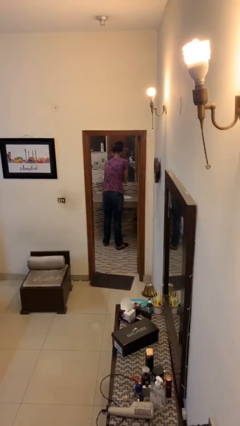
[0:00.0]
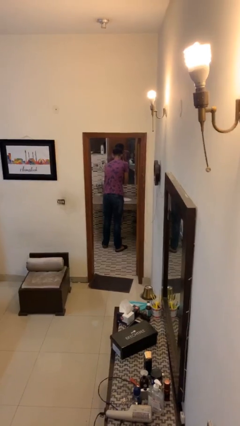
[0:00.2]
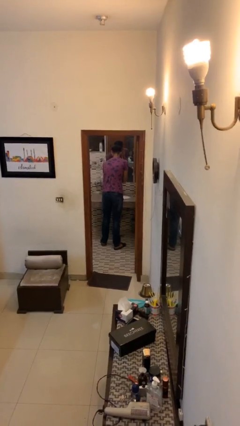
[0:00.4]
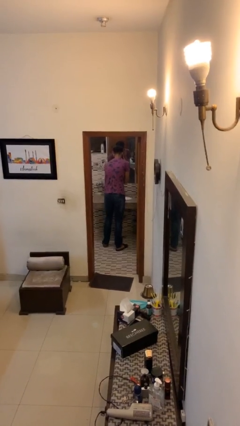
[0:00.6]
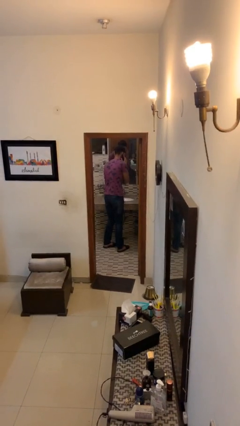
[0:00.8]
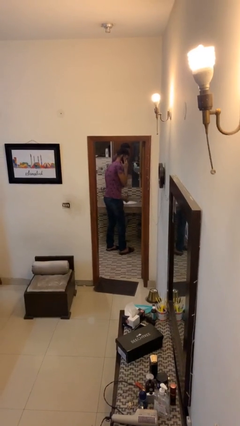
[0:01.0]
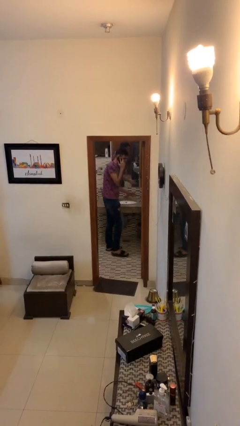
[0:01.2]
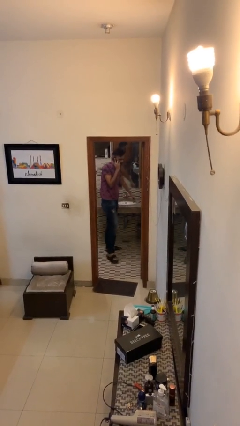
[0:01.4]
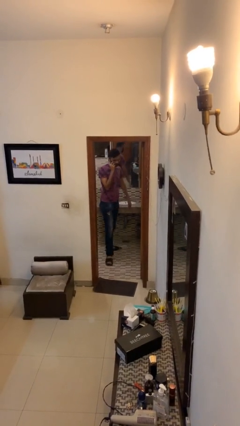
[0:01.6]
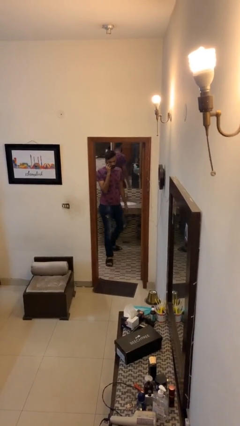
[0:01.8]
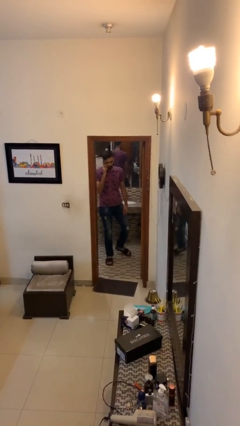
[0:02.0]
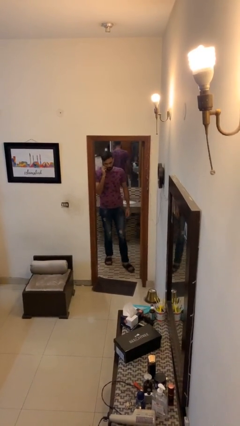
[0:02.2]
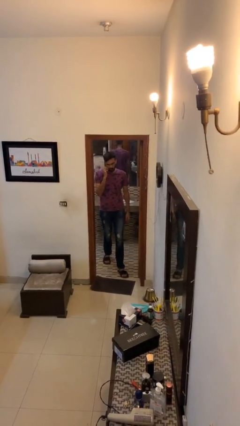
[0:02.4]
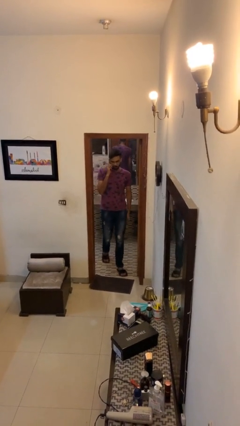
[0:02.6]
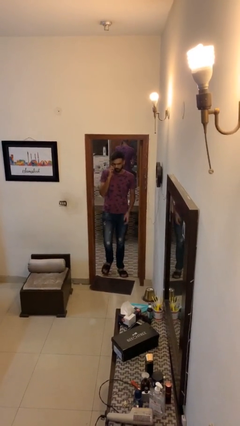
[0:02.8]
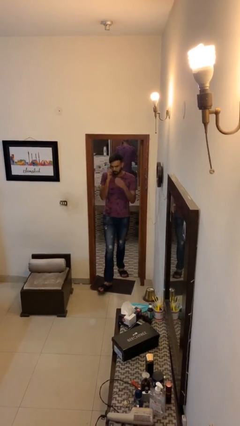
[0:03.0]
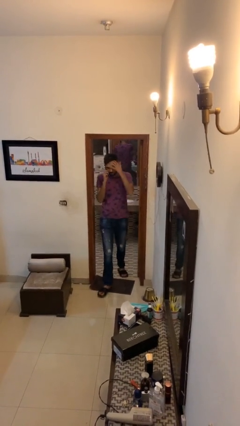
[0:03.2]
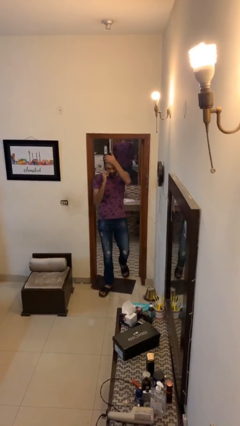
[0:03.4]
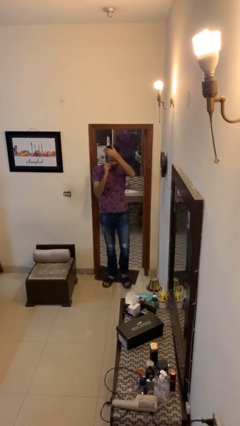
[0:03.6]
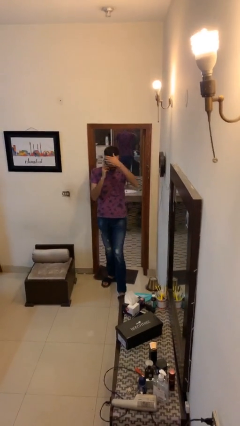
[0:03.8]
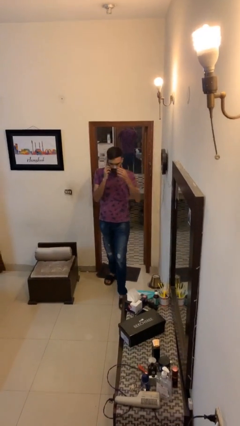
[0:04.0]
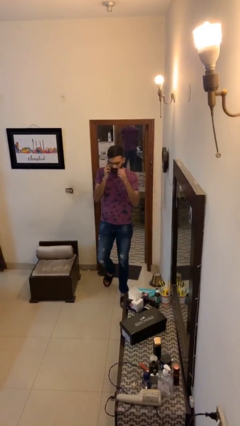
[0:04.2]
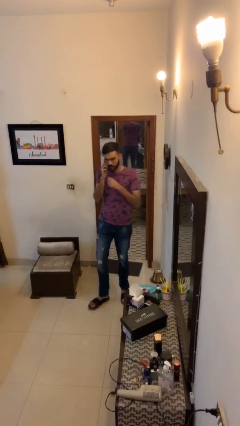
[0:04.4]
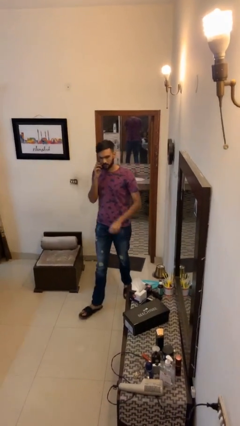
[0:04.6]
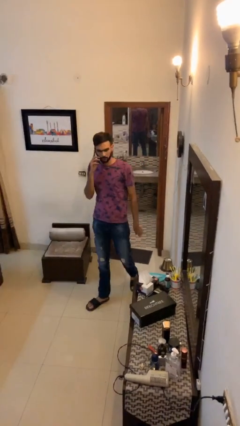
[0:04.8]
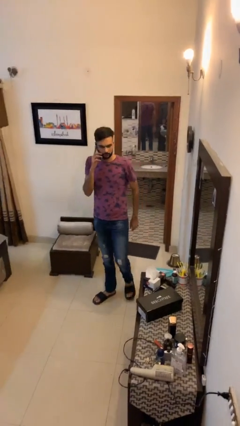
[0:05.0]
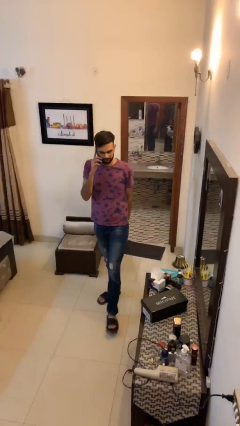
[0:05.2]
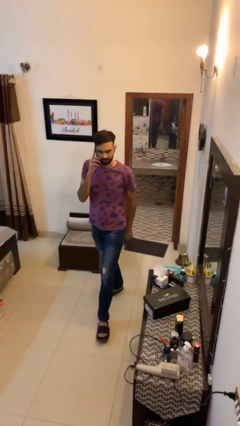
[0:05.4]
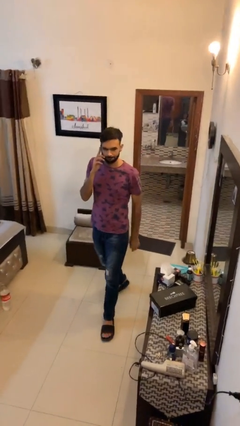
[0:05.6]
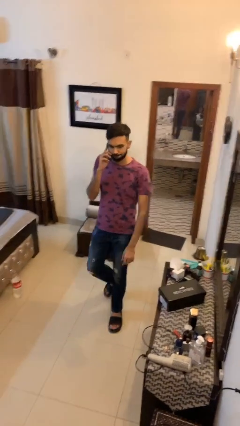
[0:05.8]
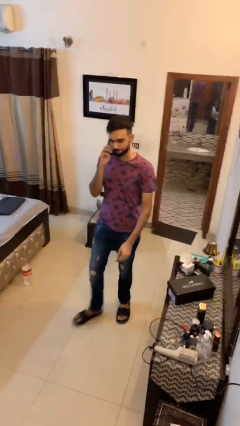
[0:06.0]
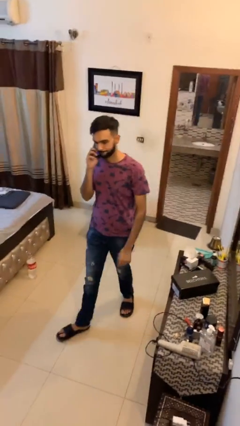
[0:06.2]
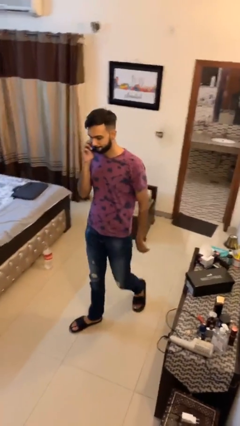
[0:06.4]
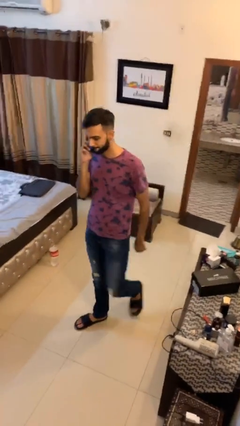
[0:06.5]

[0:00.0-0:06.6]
person enters scene through structure

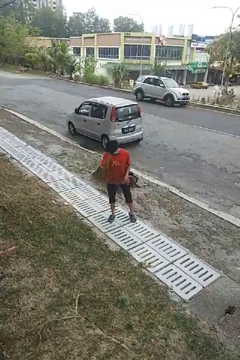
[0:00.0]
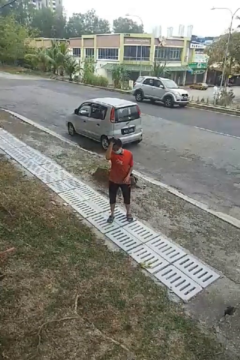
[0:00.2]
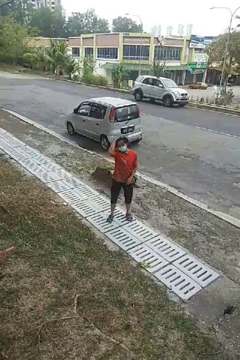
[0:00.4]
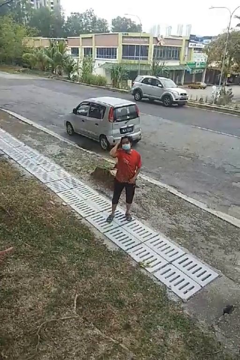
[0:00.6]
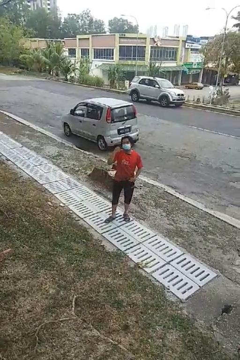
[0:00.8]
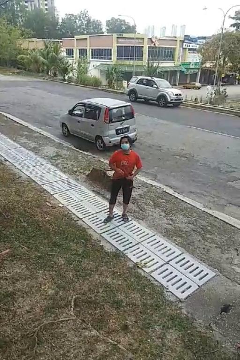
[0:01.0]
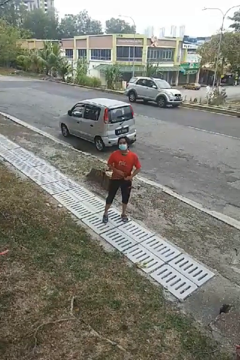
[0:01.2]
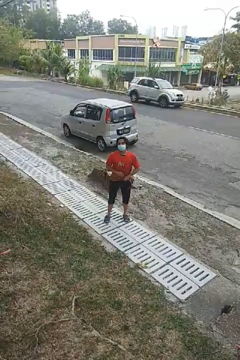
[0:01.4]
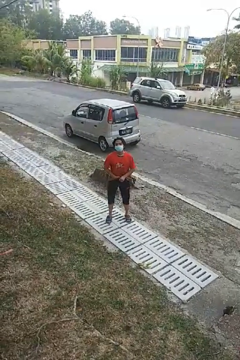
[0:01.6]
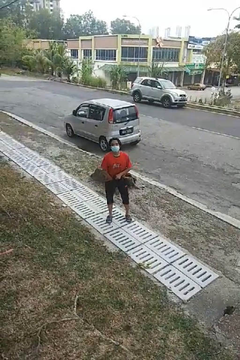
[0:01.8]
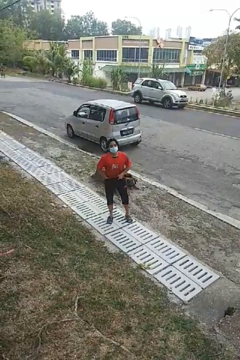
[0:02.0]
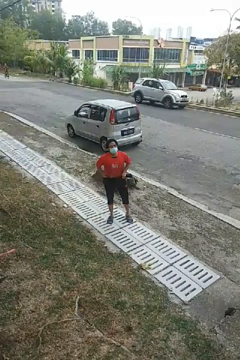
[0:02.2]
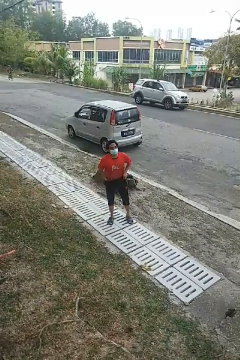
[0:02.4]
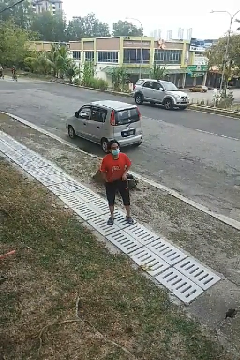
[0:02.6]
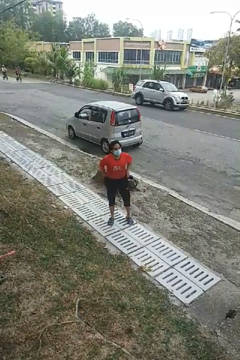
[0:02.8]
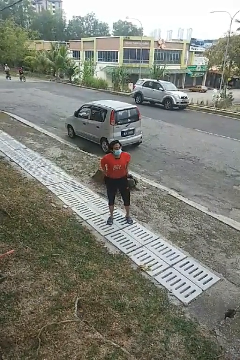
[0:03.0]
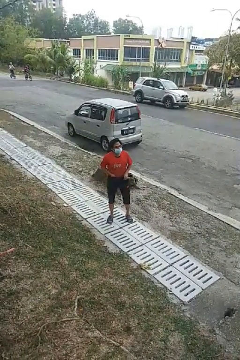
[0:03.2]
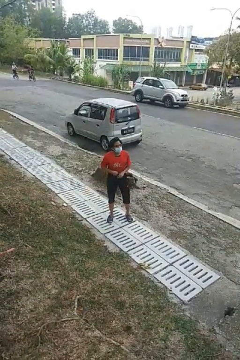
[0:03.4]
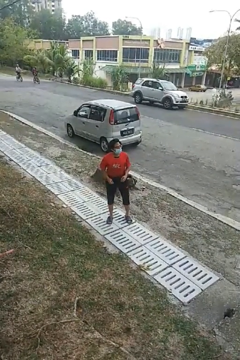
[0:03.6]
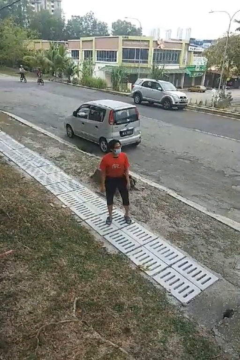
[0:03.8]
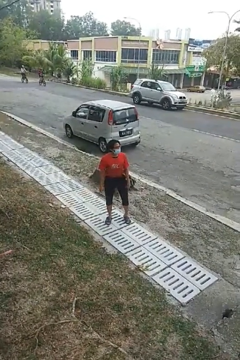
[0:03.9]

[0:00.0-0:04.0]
person tucks in shirt

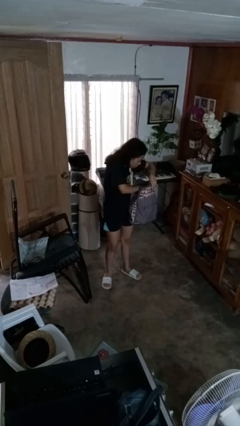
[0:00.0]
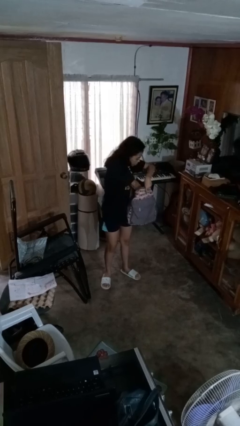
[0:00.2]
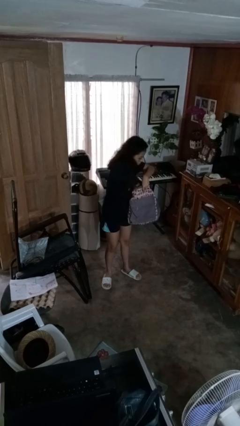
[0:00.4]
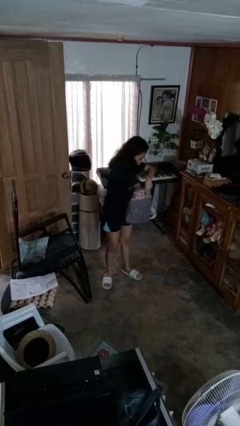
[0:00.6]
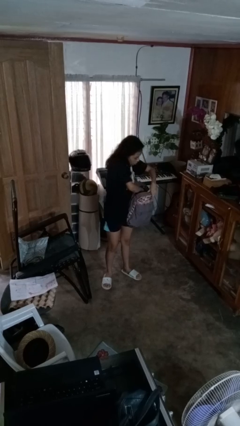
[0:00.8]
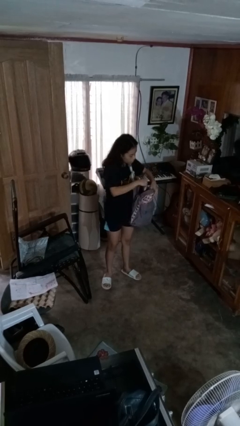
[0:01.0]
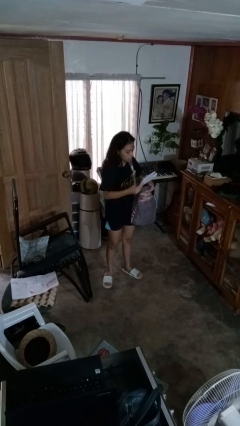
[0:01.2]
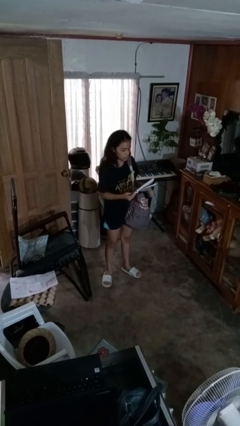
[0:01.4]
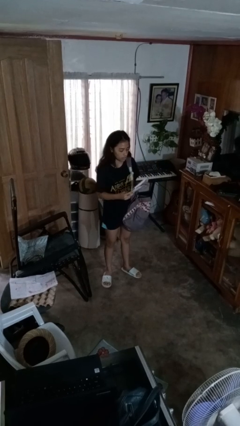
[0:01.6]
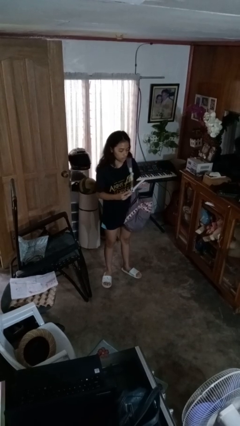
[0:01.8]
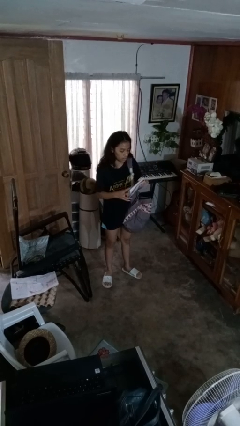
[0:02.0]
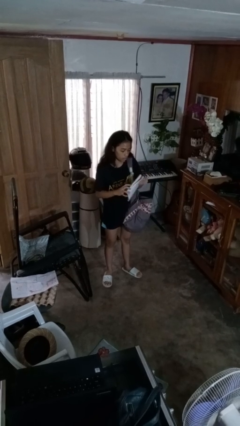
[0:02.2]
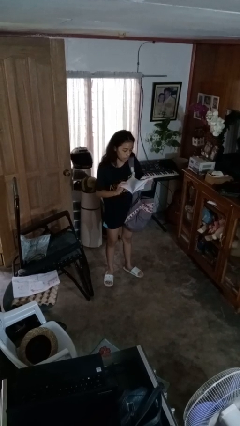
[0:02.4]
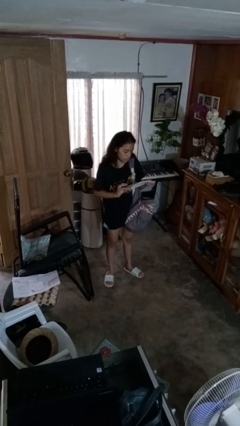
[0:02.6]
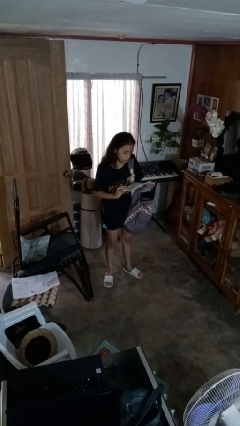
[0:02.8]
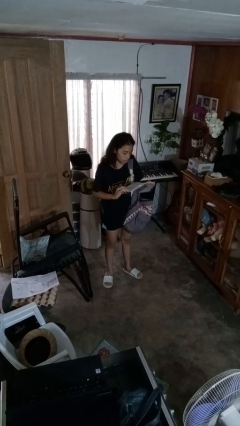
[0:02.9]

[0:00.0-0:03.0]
person takes object from backpack

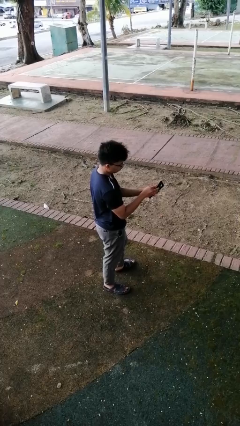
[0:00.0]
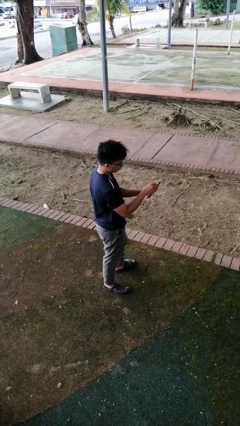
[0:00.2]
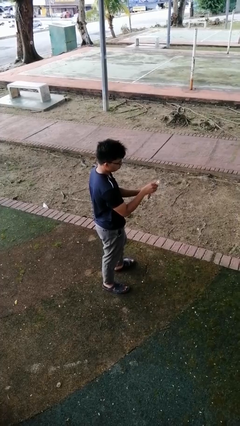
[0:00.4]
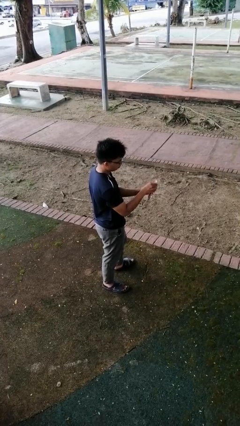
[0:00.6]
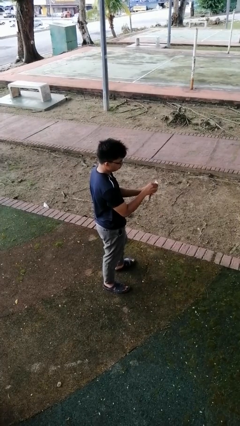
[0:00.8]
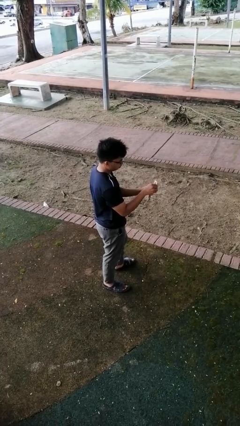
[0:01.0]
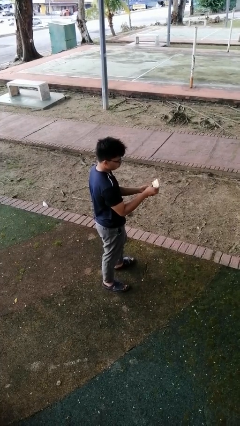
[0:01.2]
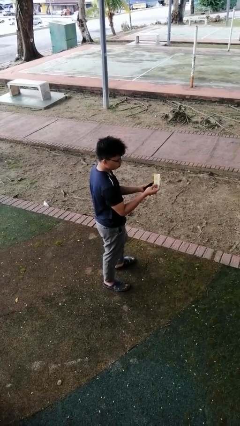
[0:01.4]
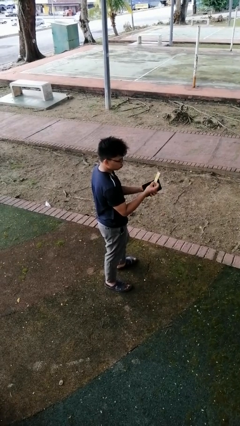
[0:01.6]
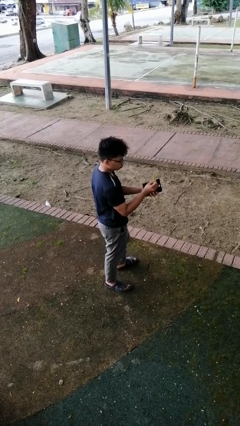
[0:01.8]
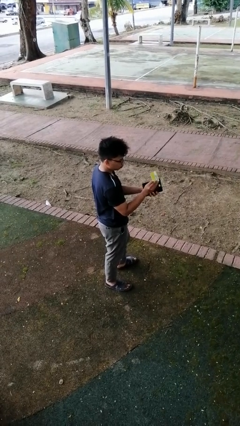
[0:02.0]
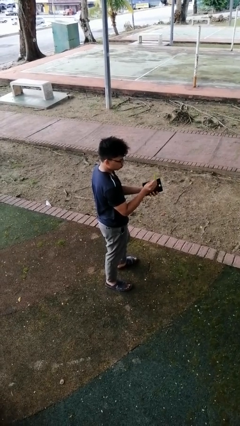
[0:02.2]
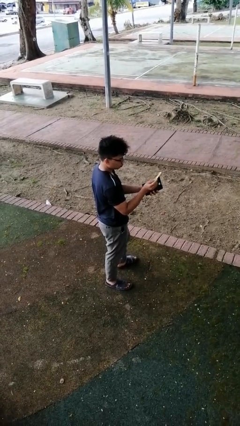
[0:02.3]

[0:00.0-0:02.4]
person takes object from purse

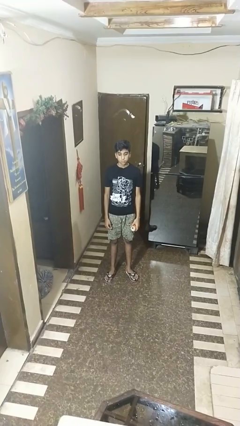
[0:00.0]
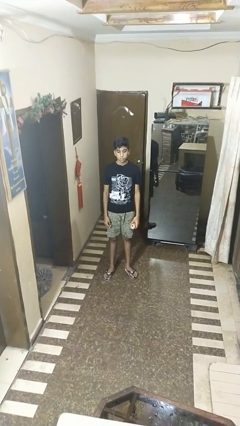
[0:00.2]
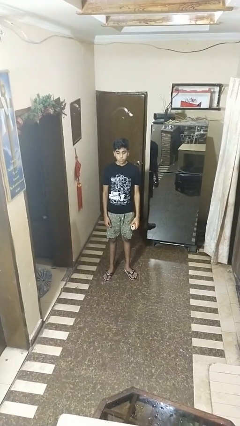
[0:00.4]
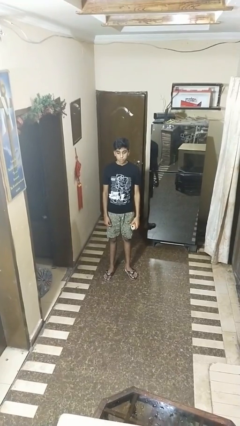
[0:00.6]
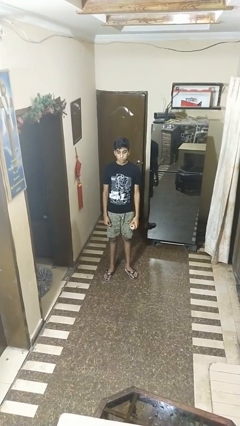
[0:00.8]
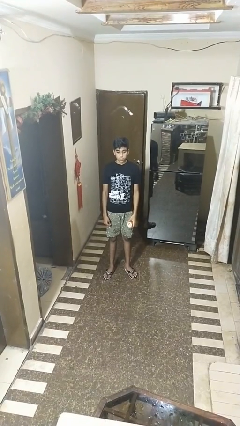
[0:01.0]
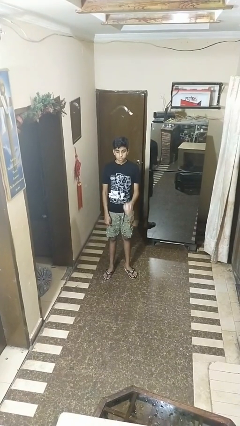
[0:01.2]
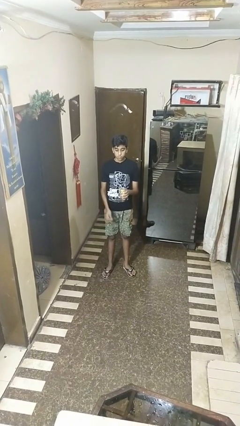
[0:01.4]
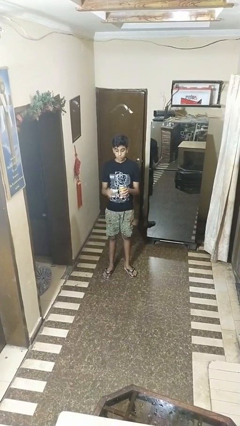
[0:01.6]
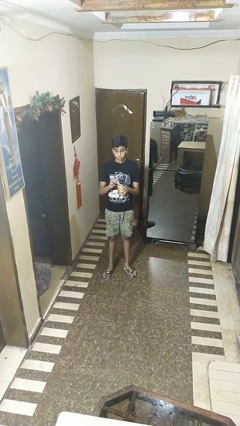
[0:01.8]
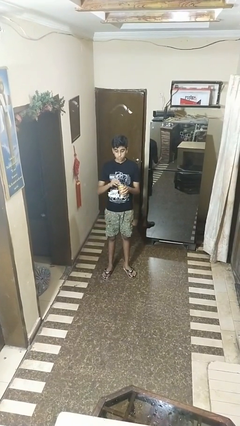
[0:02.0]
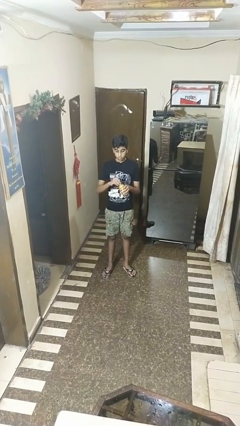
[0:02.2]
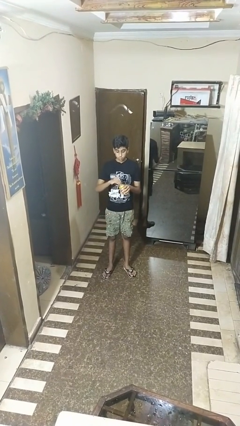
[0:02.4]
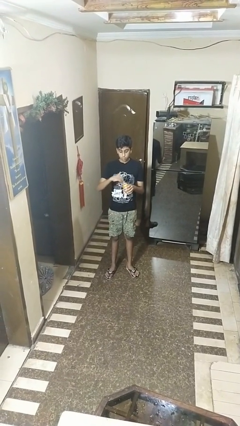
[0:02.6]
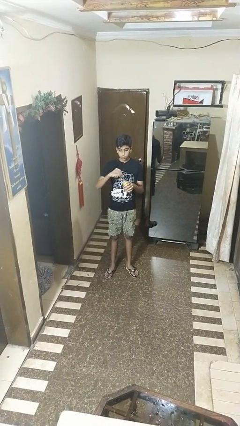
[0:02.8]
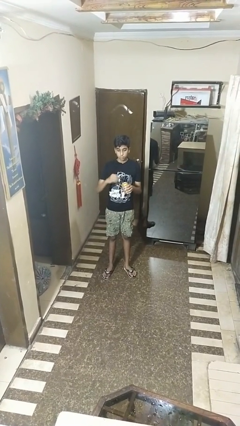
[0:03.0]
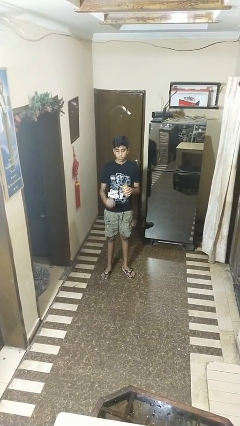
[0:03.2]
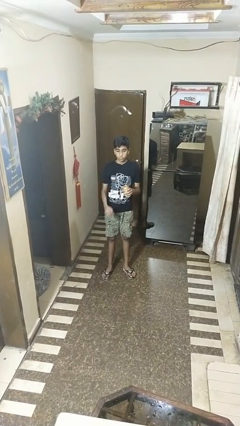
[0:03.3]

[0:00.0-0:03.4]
person opens beverage can
